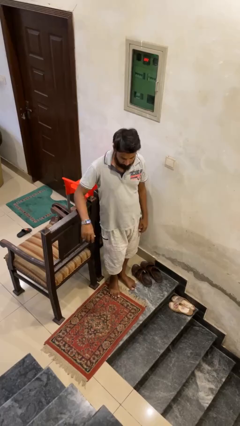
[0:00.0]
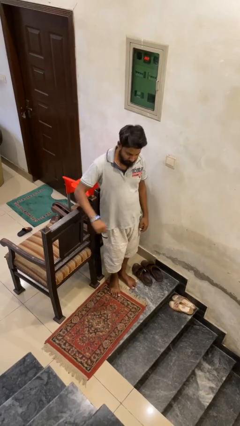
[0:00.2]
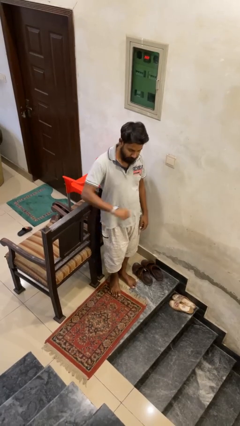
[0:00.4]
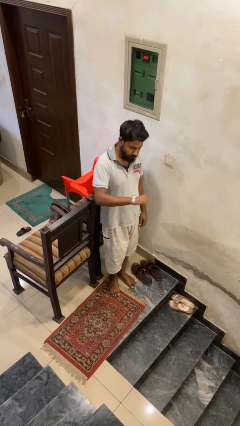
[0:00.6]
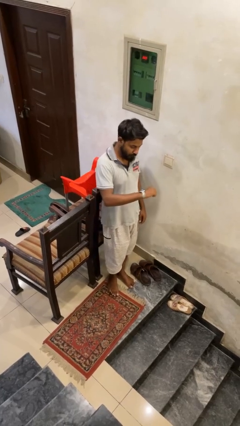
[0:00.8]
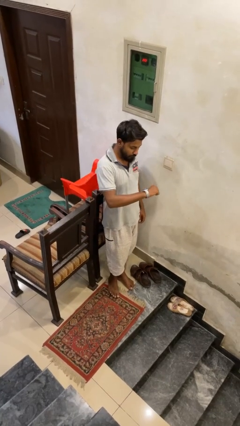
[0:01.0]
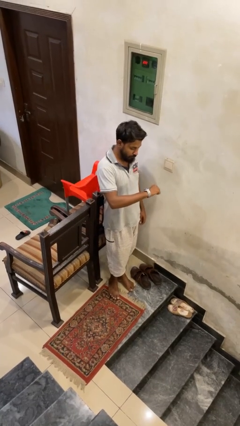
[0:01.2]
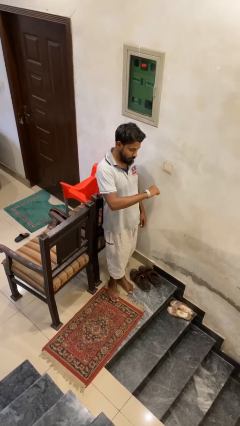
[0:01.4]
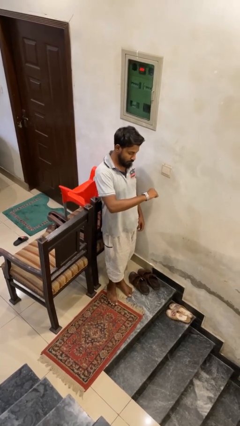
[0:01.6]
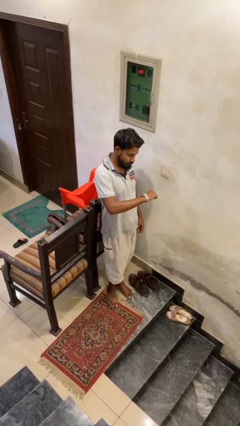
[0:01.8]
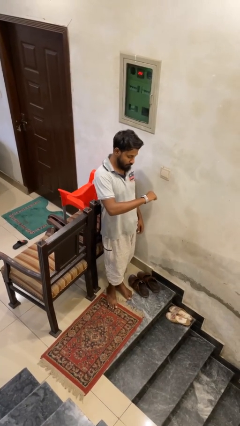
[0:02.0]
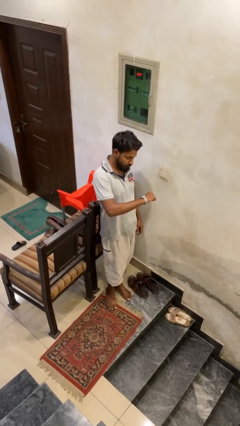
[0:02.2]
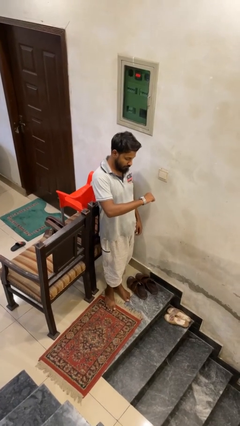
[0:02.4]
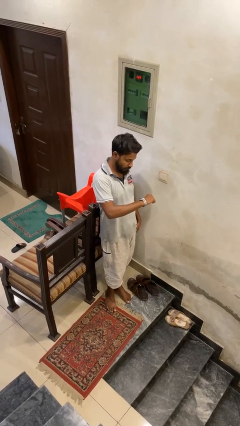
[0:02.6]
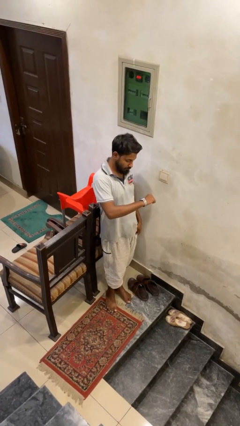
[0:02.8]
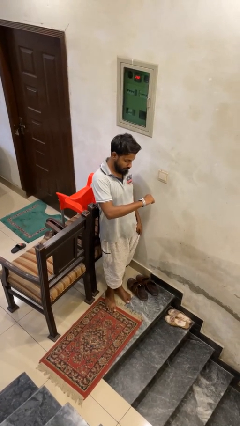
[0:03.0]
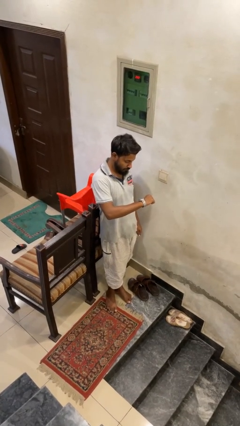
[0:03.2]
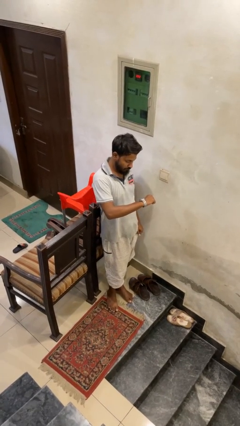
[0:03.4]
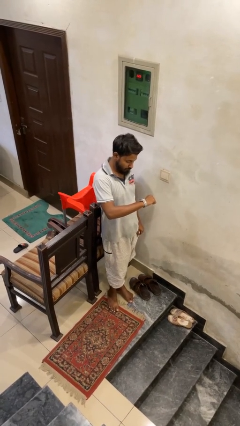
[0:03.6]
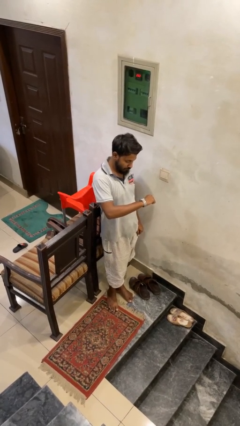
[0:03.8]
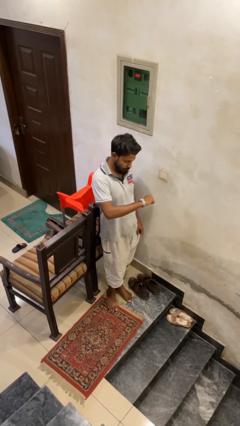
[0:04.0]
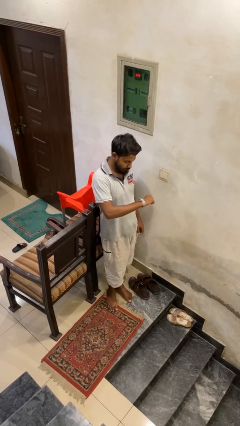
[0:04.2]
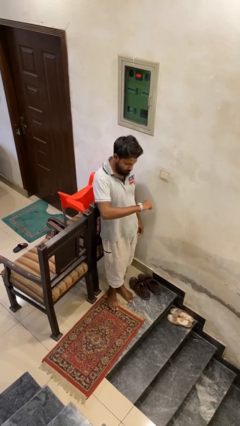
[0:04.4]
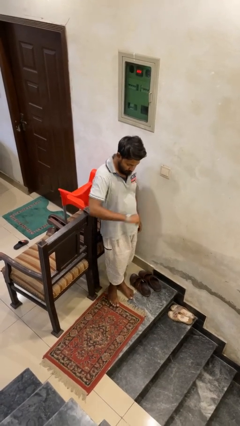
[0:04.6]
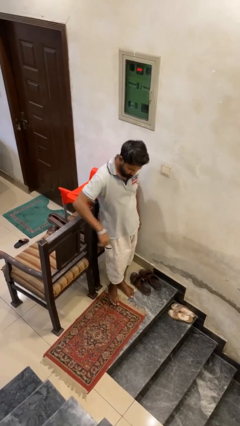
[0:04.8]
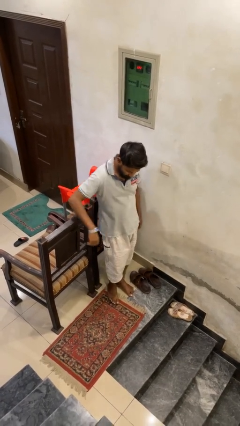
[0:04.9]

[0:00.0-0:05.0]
person looks at wristwatch

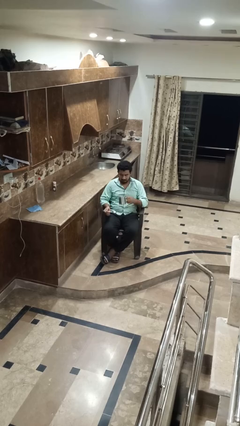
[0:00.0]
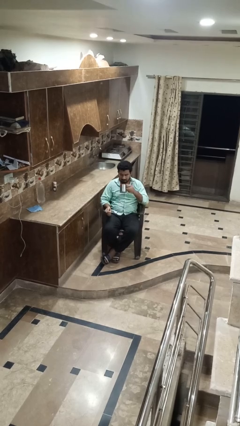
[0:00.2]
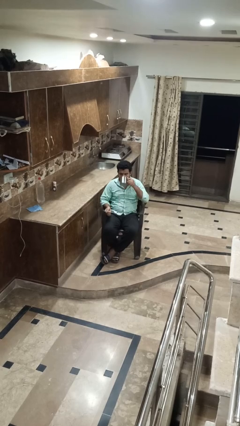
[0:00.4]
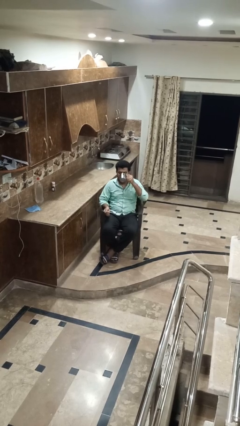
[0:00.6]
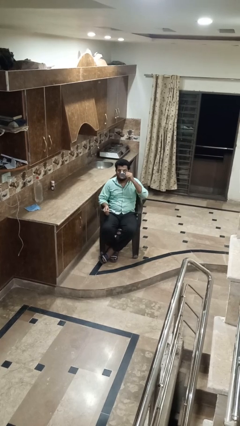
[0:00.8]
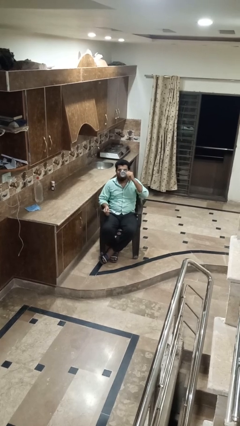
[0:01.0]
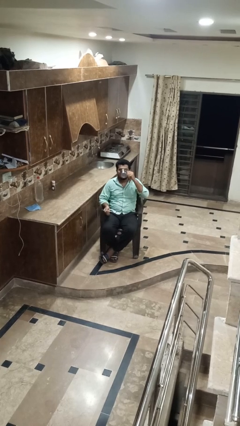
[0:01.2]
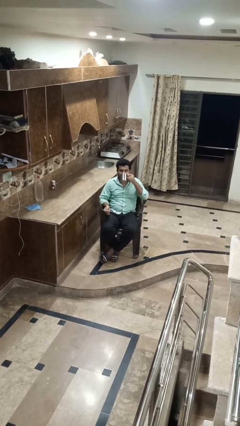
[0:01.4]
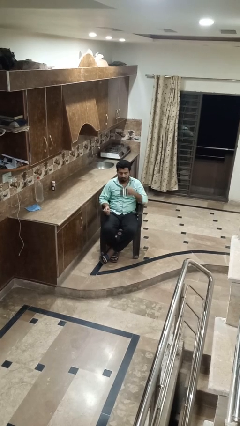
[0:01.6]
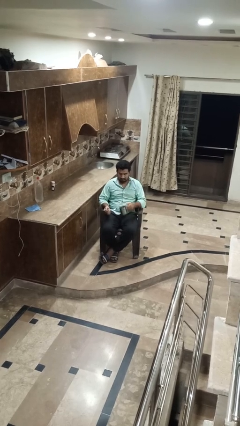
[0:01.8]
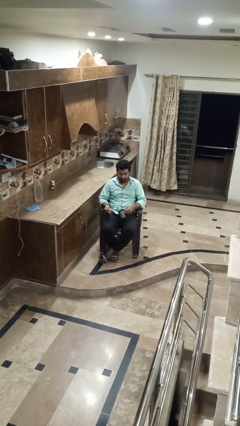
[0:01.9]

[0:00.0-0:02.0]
person drinks from mug

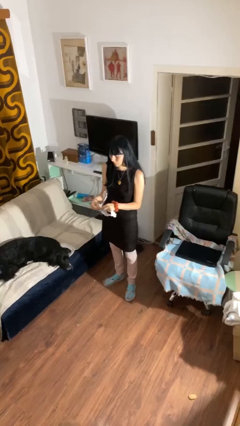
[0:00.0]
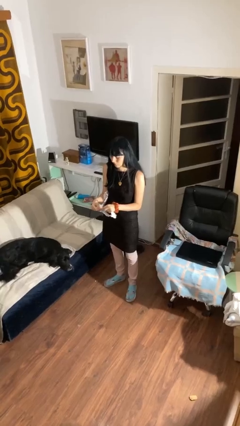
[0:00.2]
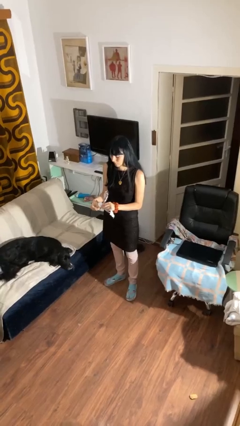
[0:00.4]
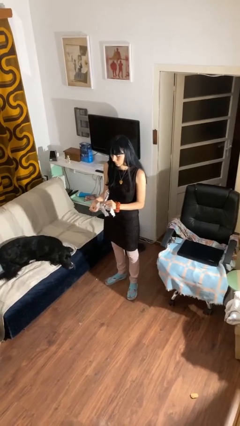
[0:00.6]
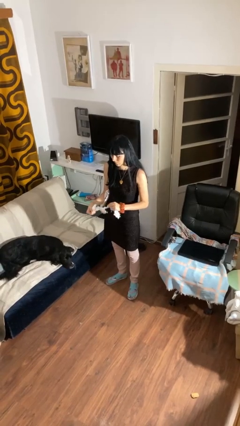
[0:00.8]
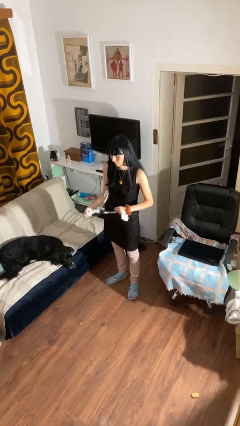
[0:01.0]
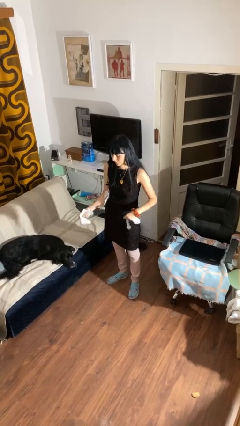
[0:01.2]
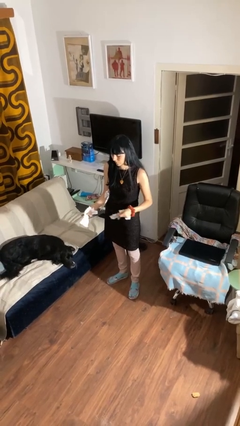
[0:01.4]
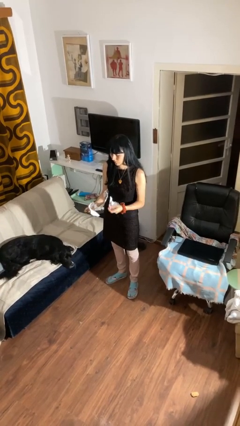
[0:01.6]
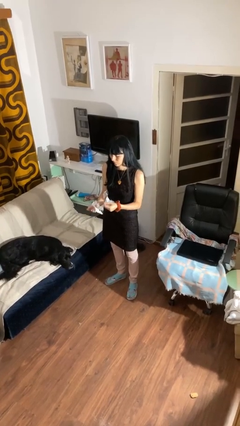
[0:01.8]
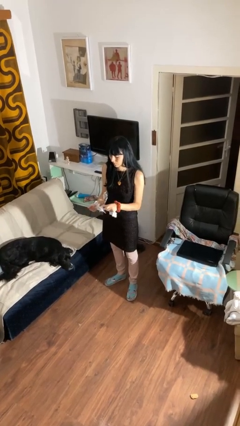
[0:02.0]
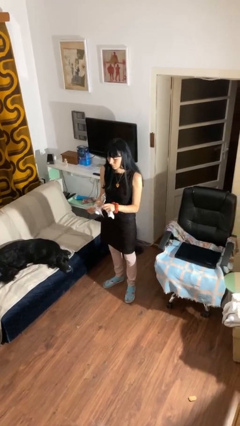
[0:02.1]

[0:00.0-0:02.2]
person tears paper

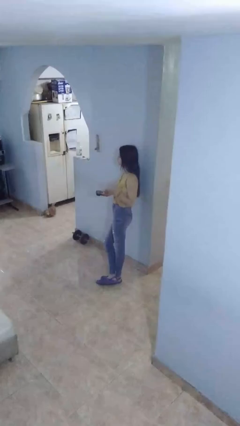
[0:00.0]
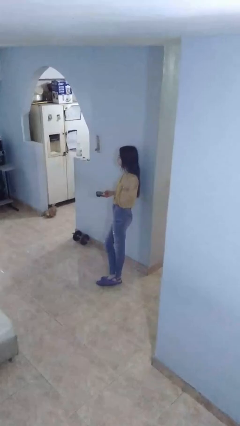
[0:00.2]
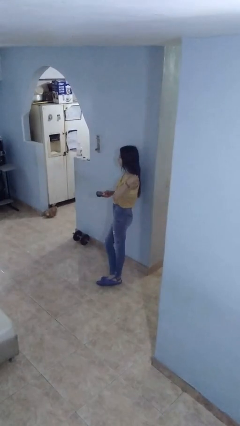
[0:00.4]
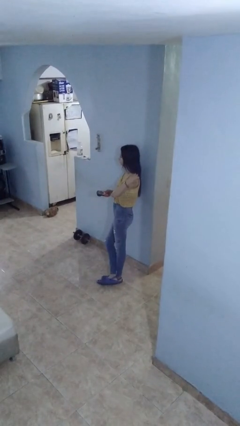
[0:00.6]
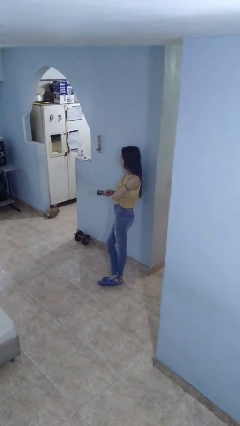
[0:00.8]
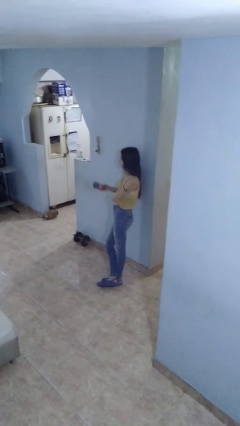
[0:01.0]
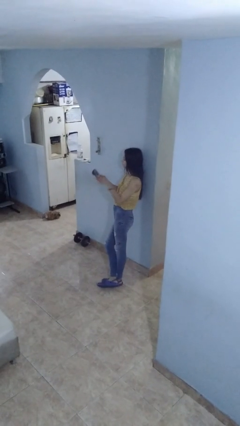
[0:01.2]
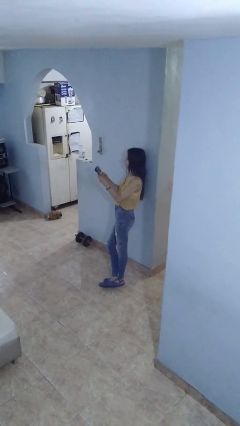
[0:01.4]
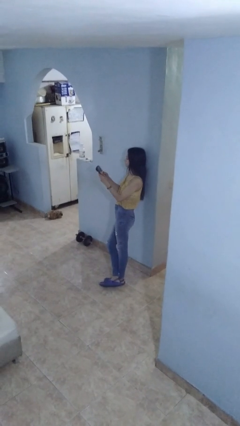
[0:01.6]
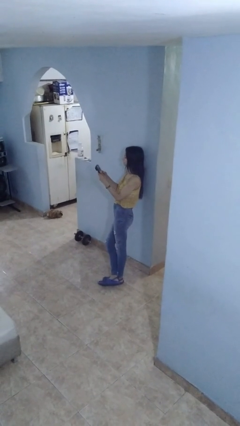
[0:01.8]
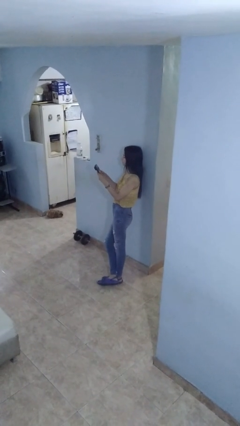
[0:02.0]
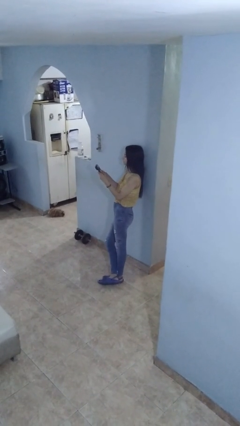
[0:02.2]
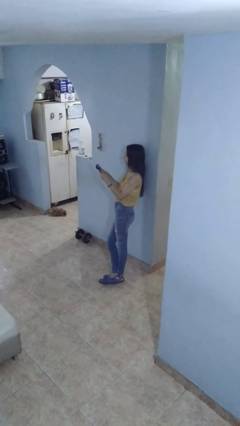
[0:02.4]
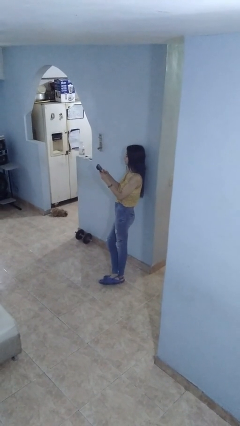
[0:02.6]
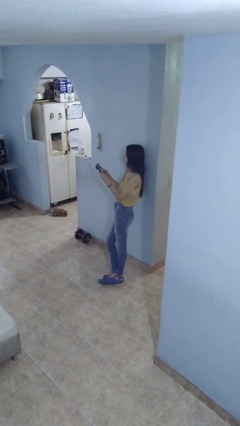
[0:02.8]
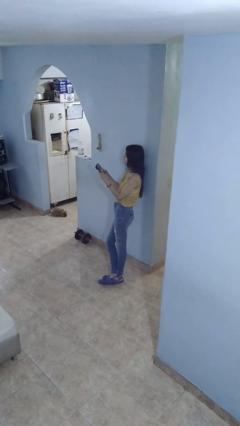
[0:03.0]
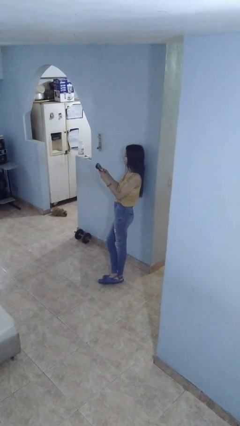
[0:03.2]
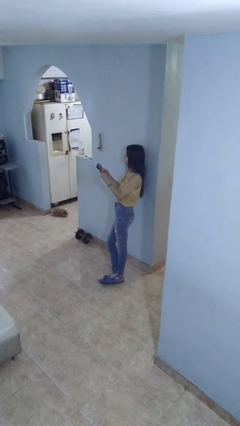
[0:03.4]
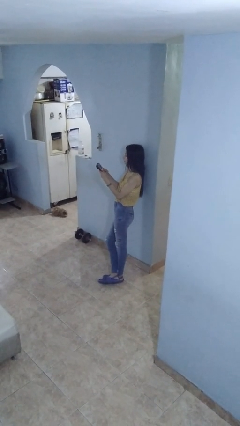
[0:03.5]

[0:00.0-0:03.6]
person interacts with handheld game

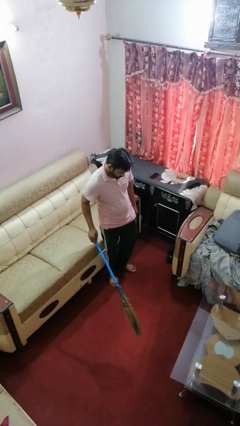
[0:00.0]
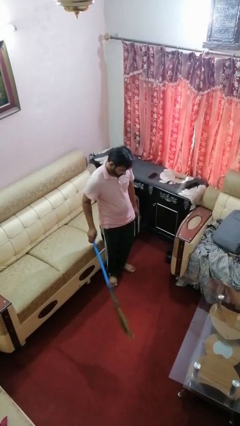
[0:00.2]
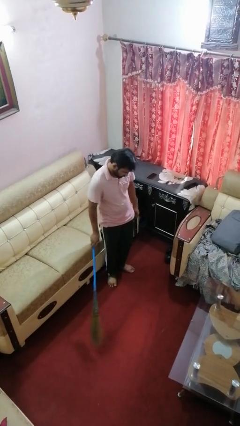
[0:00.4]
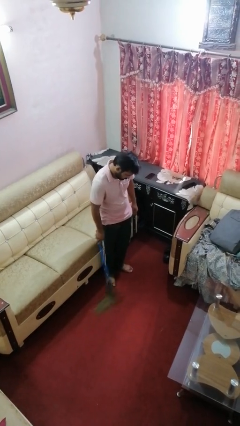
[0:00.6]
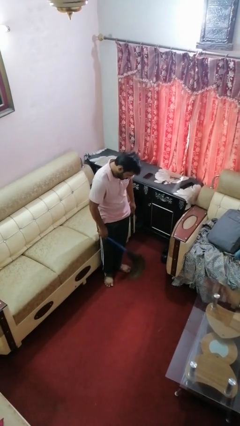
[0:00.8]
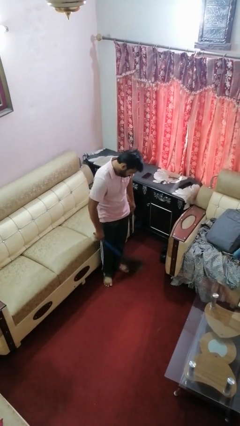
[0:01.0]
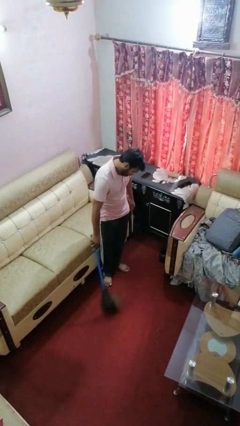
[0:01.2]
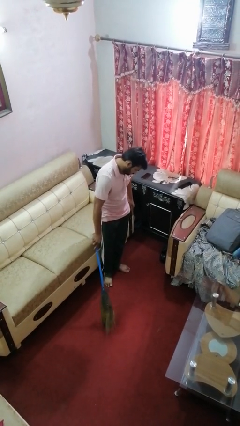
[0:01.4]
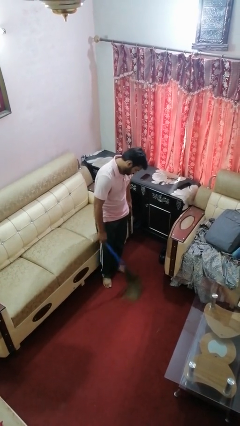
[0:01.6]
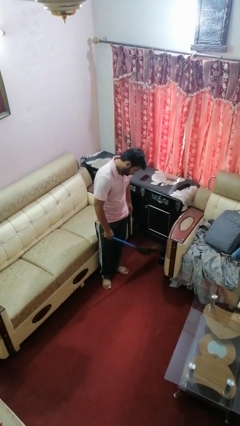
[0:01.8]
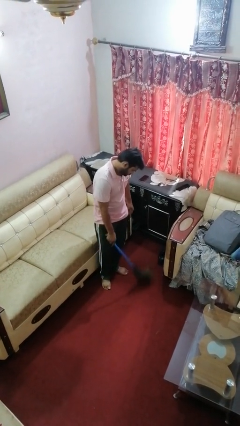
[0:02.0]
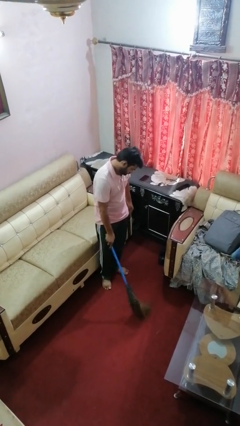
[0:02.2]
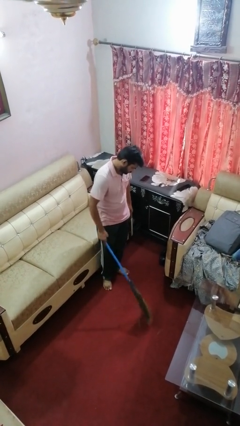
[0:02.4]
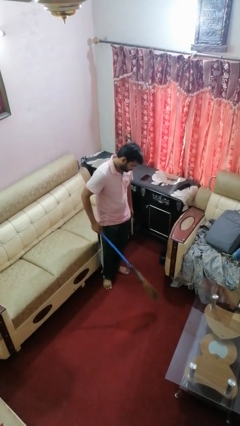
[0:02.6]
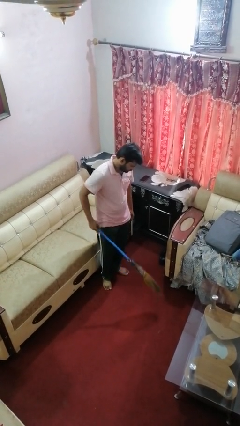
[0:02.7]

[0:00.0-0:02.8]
person sweeps floor

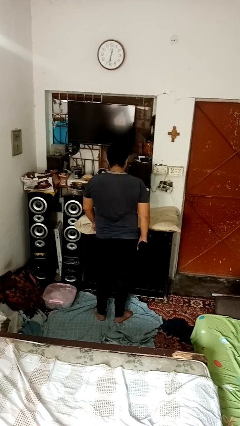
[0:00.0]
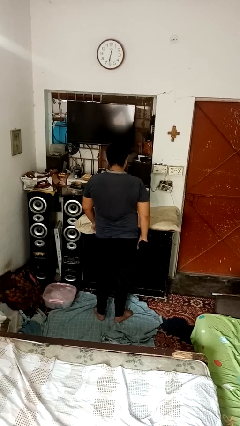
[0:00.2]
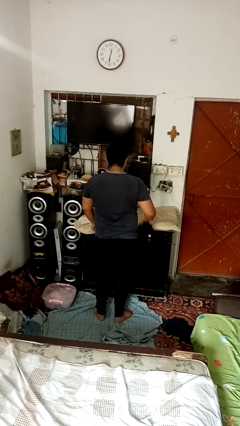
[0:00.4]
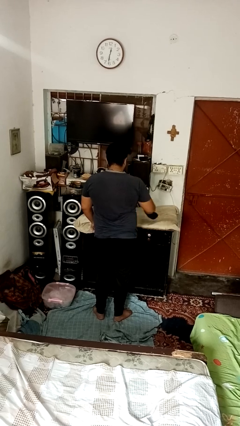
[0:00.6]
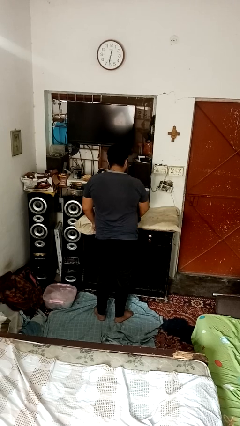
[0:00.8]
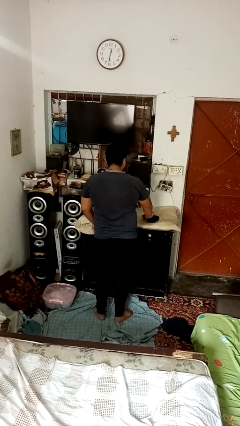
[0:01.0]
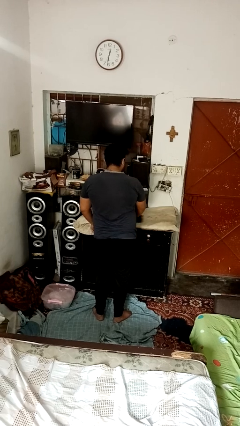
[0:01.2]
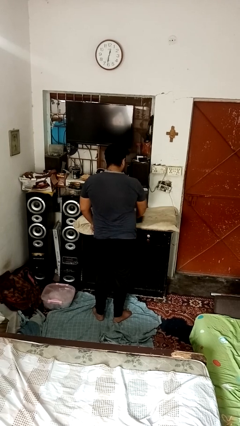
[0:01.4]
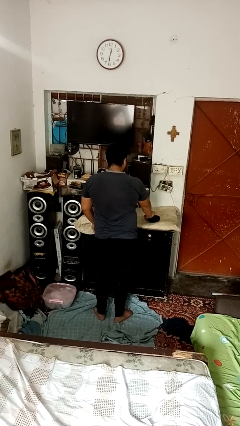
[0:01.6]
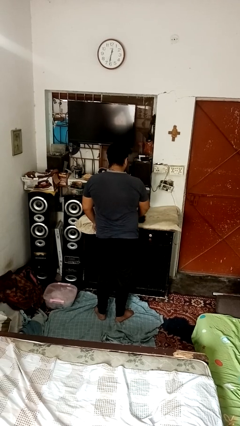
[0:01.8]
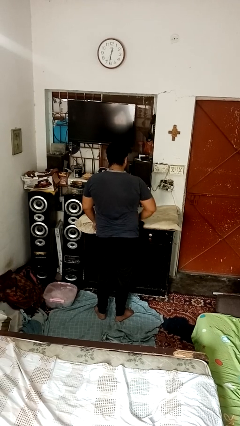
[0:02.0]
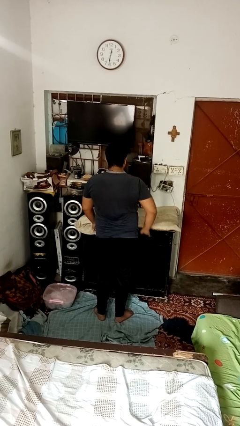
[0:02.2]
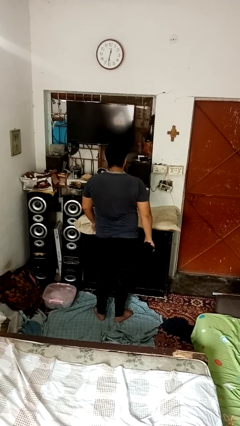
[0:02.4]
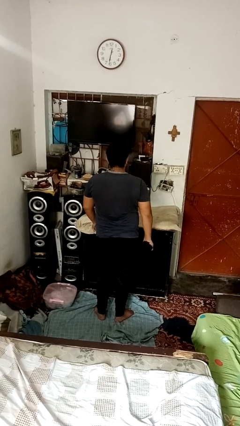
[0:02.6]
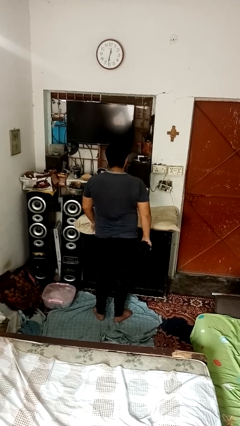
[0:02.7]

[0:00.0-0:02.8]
person cleans table with rag
